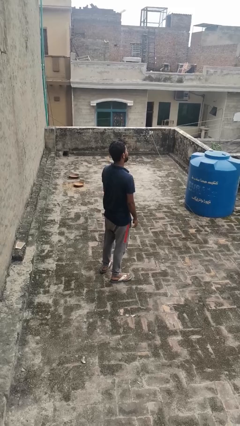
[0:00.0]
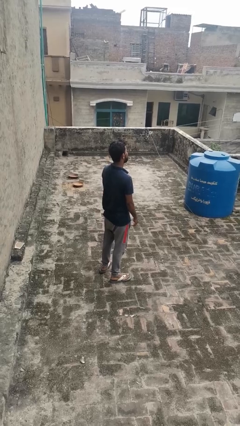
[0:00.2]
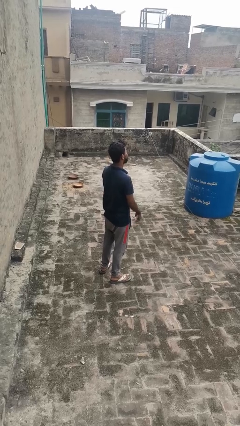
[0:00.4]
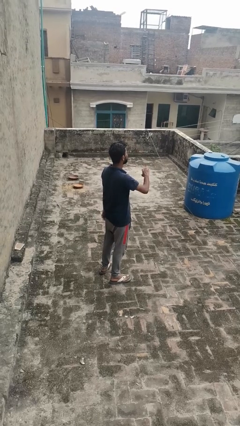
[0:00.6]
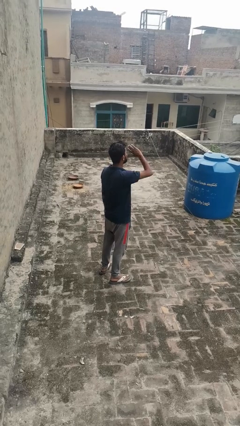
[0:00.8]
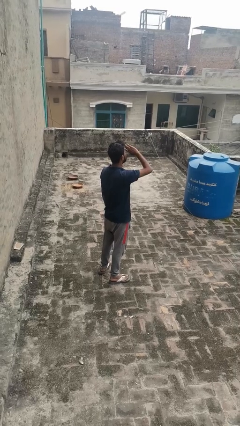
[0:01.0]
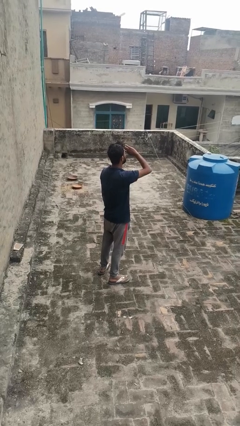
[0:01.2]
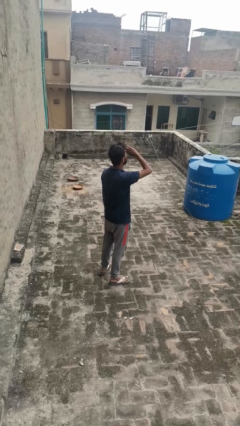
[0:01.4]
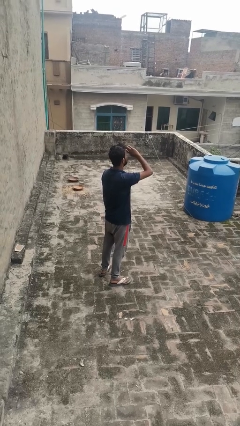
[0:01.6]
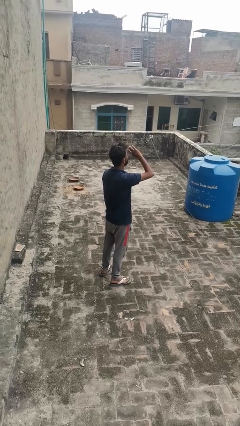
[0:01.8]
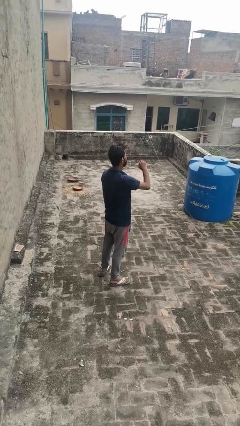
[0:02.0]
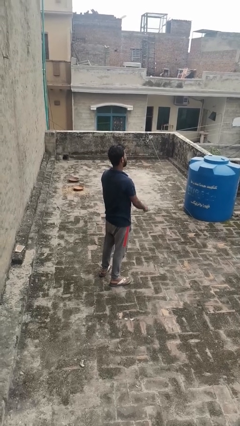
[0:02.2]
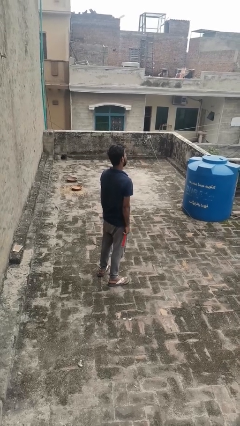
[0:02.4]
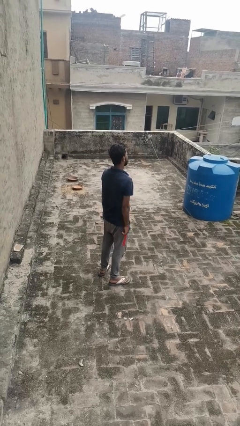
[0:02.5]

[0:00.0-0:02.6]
person shades eyes

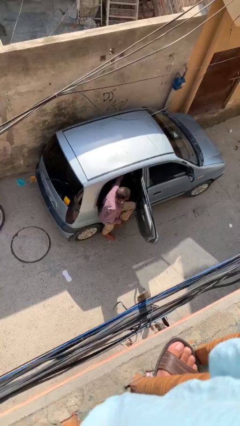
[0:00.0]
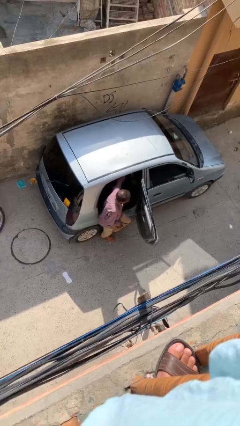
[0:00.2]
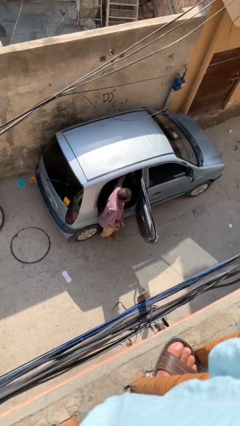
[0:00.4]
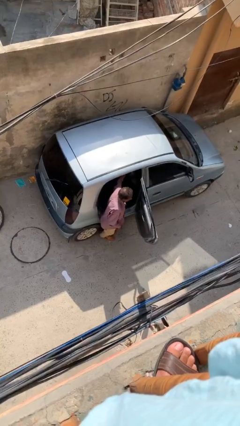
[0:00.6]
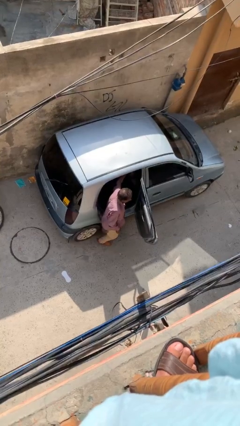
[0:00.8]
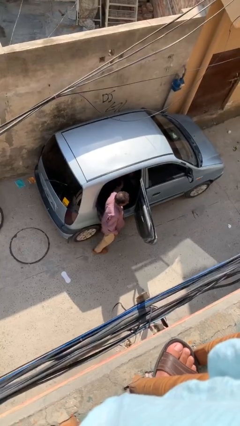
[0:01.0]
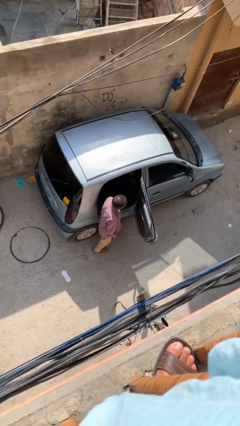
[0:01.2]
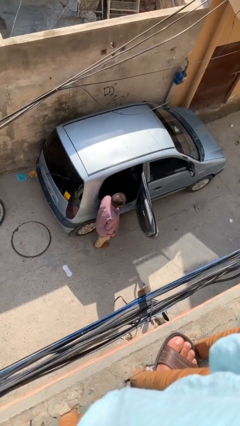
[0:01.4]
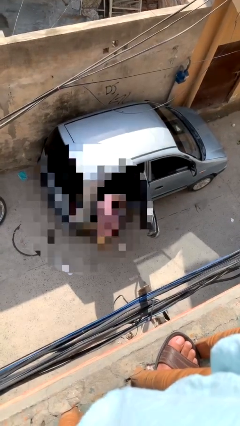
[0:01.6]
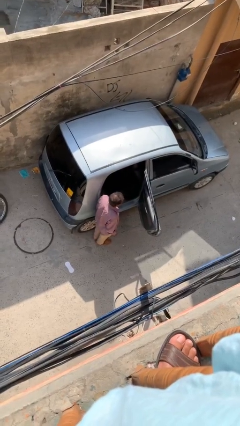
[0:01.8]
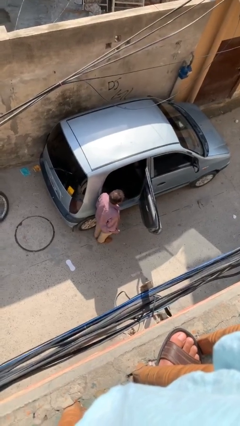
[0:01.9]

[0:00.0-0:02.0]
person exits car

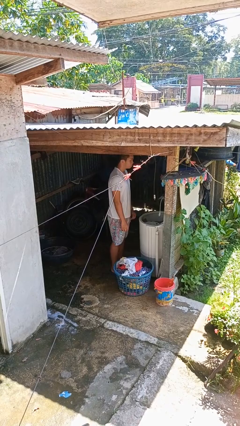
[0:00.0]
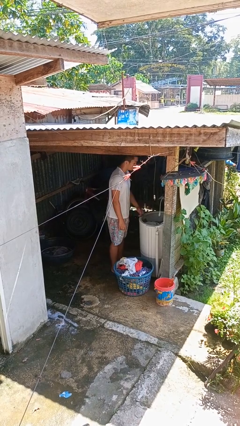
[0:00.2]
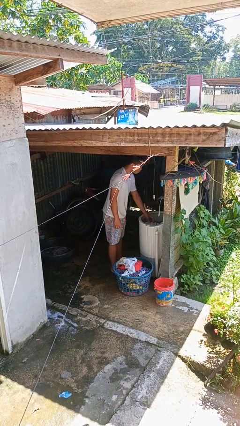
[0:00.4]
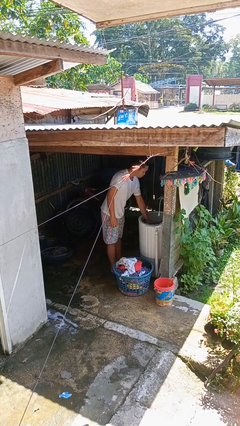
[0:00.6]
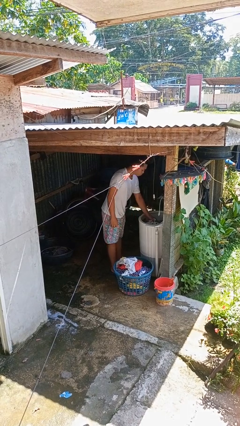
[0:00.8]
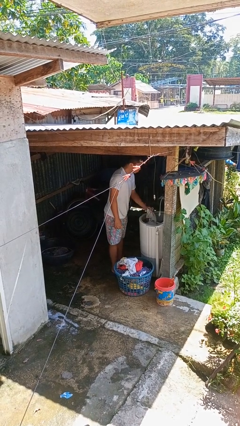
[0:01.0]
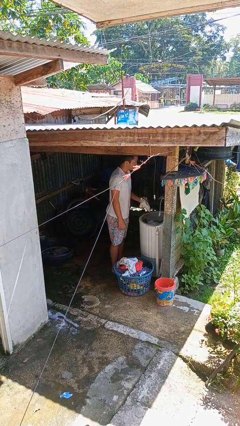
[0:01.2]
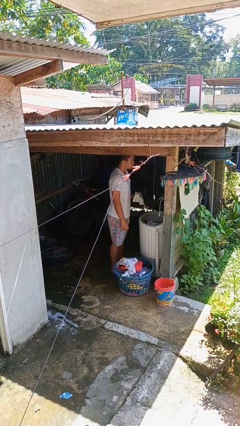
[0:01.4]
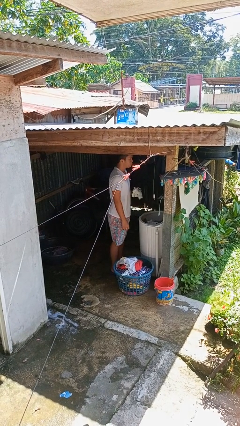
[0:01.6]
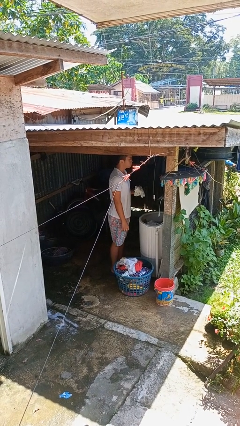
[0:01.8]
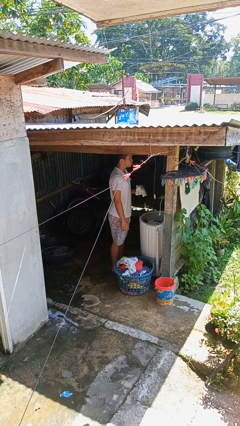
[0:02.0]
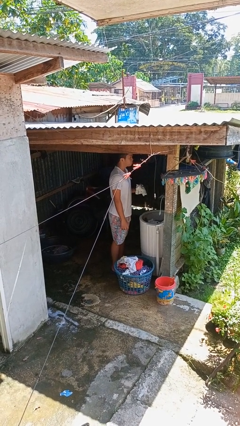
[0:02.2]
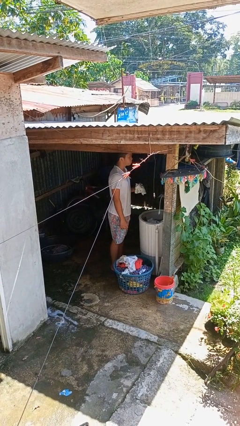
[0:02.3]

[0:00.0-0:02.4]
person unloads clotheswasher

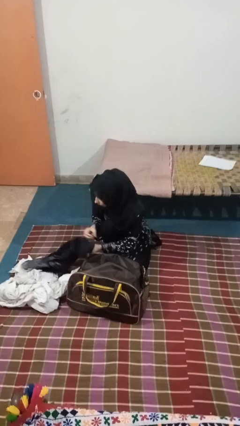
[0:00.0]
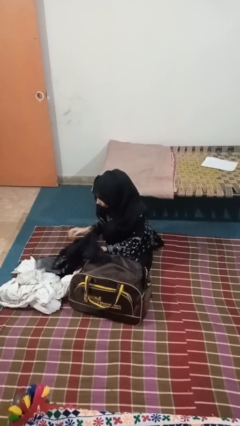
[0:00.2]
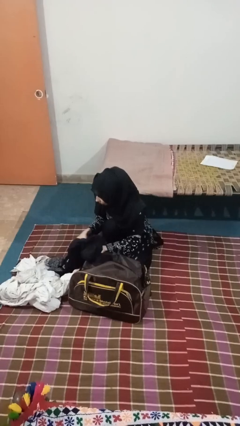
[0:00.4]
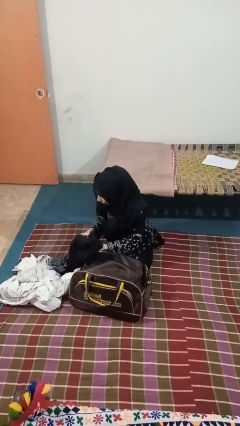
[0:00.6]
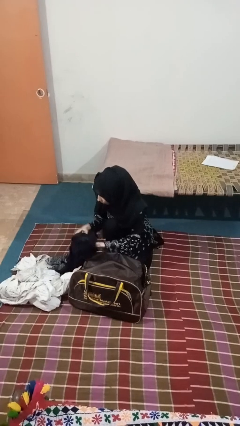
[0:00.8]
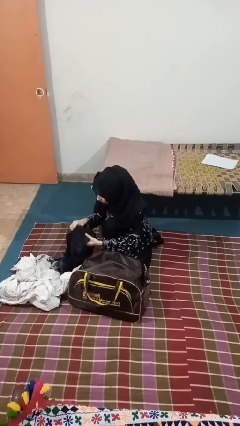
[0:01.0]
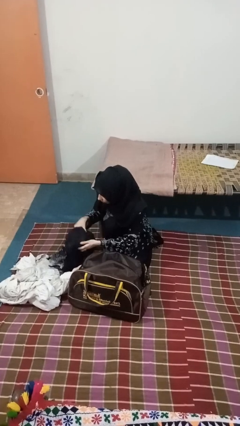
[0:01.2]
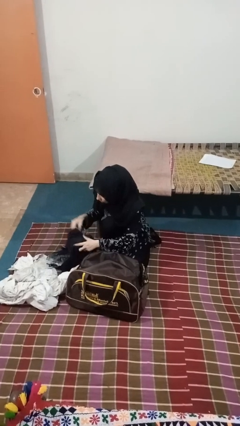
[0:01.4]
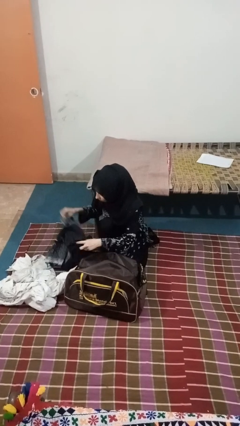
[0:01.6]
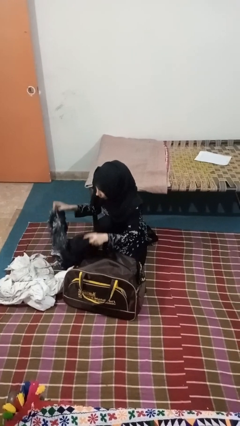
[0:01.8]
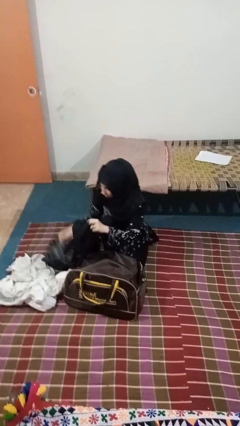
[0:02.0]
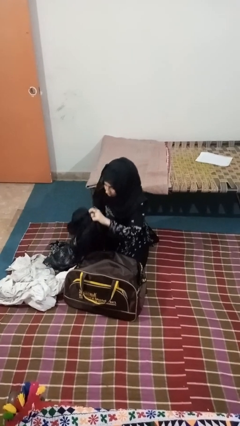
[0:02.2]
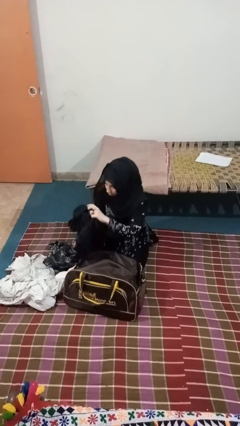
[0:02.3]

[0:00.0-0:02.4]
person loads clothes into suitcase

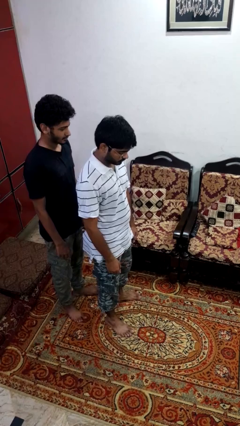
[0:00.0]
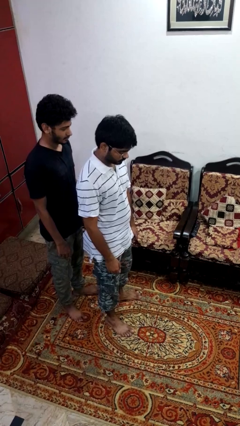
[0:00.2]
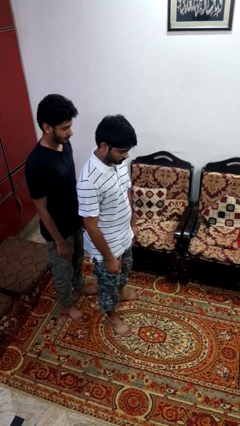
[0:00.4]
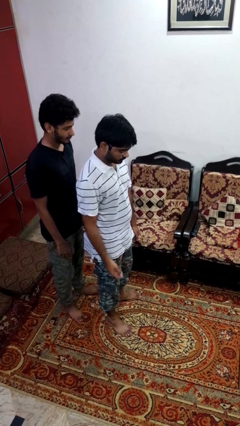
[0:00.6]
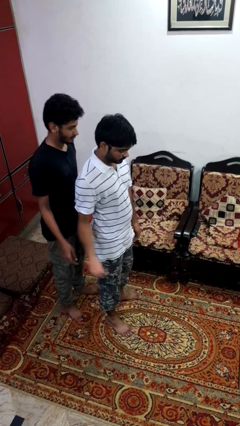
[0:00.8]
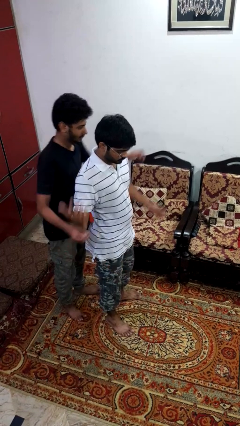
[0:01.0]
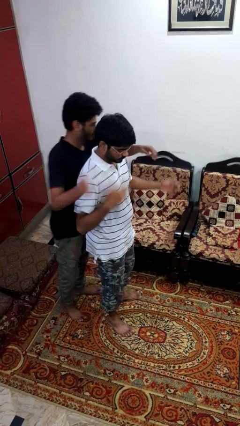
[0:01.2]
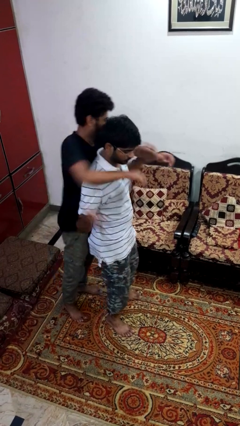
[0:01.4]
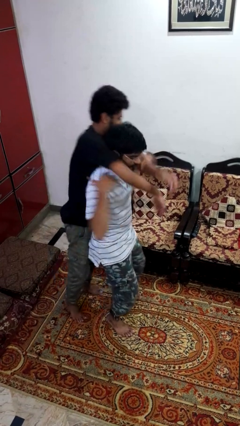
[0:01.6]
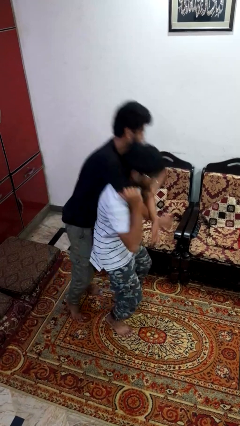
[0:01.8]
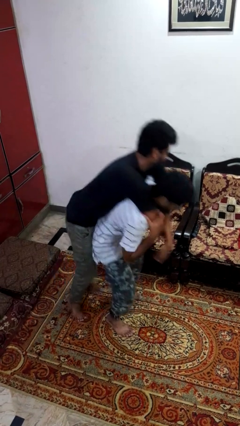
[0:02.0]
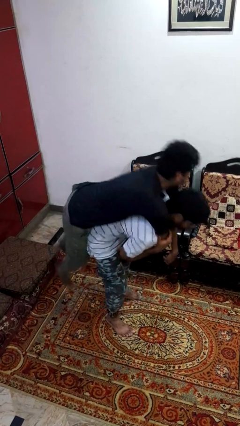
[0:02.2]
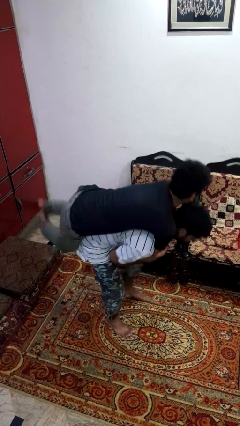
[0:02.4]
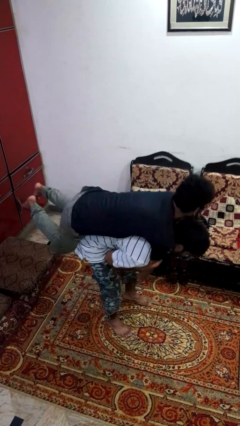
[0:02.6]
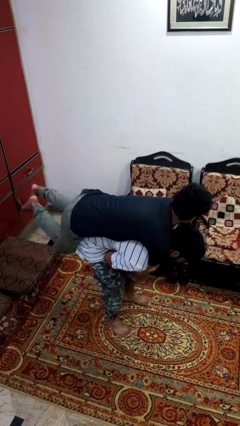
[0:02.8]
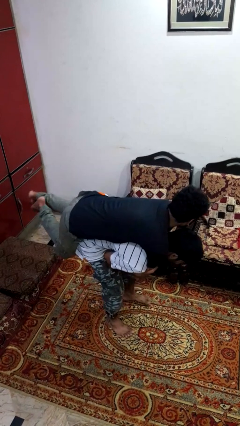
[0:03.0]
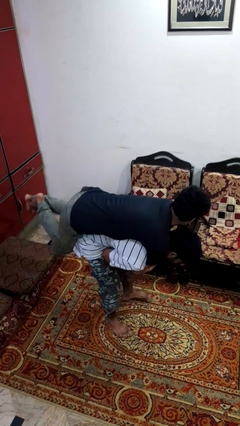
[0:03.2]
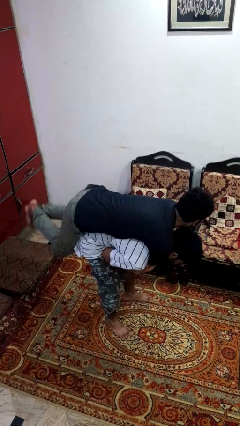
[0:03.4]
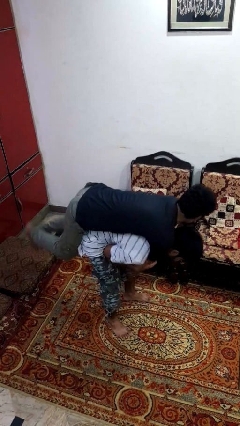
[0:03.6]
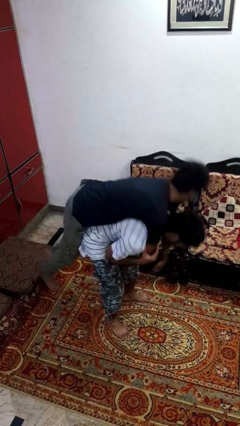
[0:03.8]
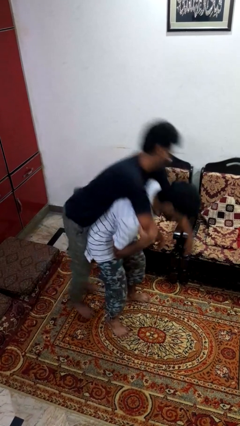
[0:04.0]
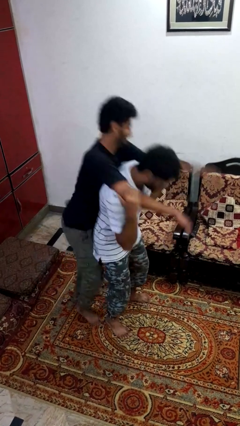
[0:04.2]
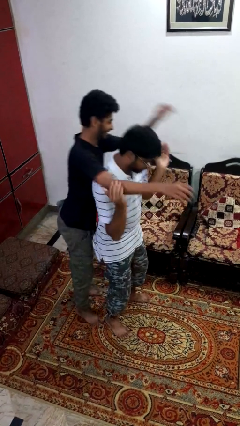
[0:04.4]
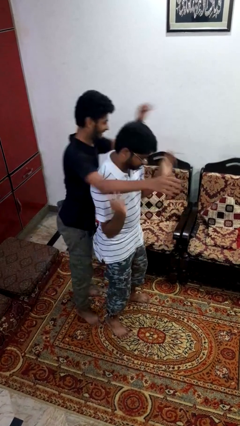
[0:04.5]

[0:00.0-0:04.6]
person carries person over shoulder

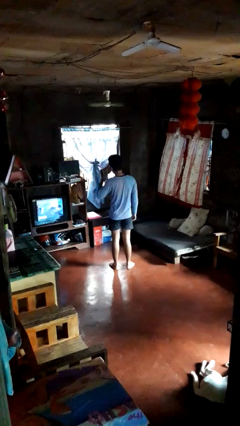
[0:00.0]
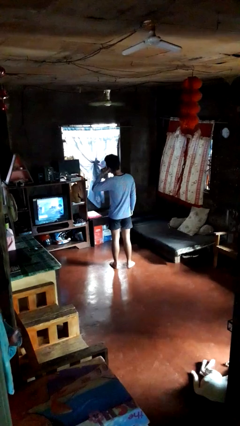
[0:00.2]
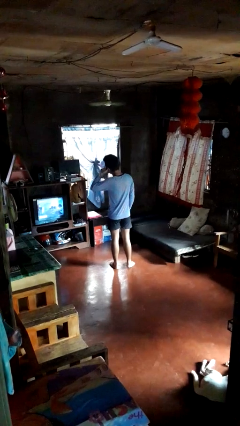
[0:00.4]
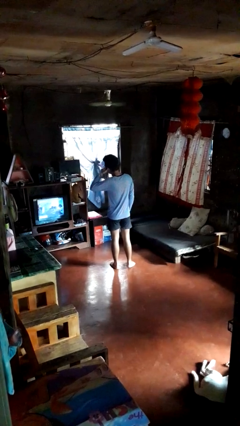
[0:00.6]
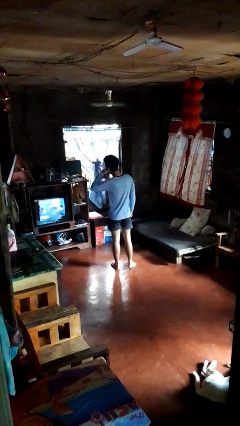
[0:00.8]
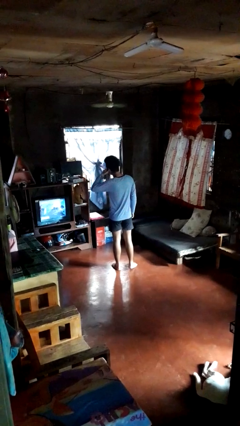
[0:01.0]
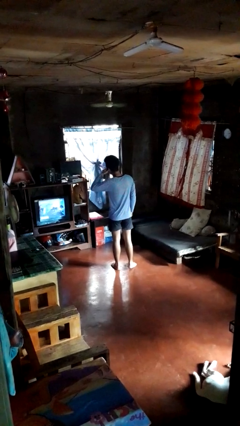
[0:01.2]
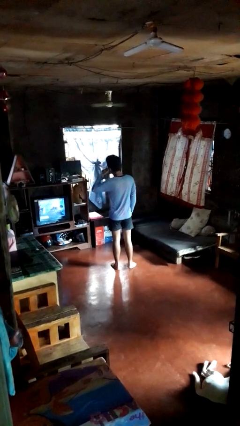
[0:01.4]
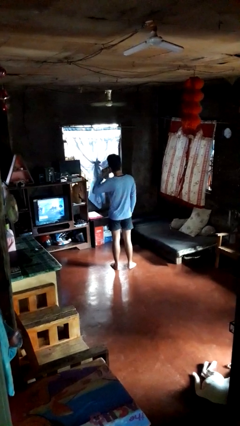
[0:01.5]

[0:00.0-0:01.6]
person gestures call me

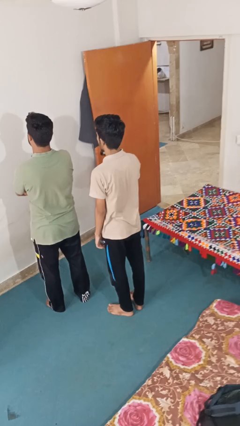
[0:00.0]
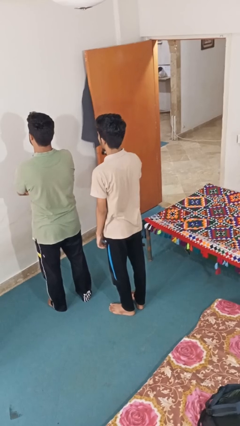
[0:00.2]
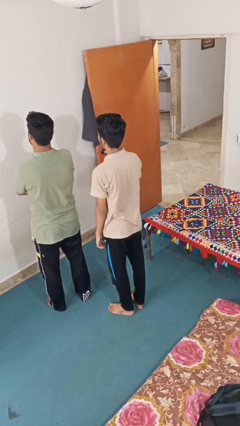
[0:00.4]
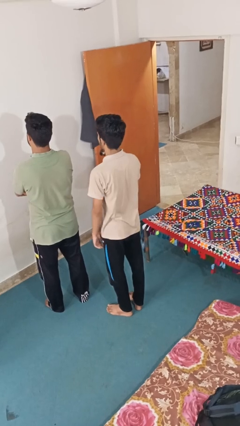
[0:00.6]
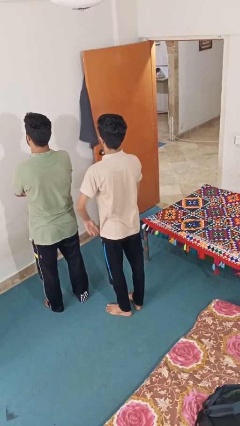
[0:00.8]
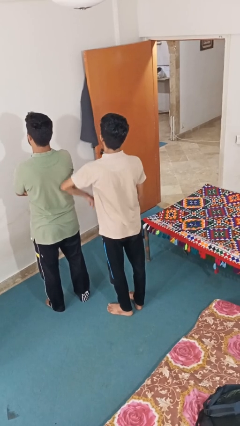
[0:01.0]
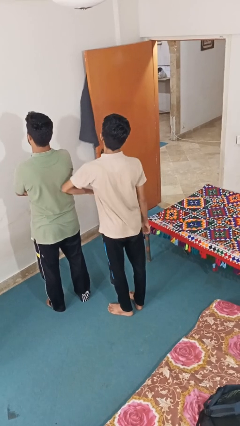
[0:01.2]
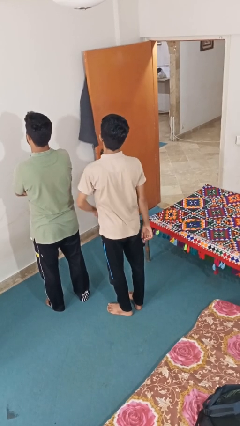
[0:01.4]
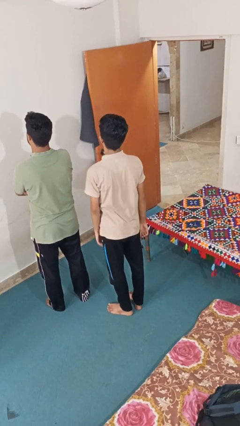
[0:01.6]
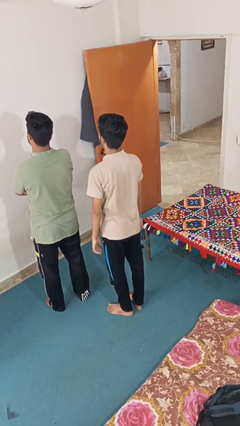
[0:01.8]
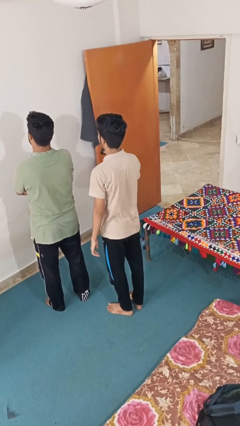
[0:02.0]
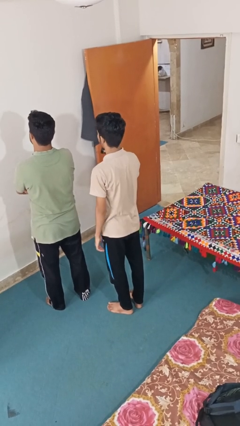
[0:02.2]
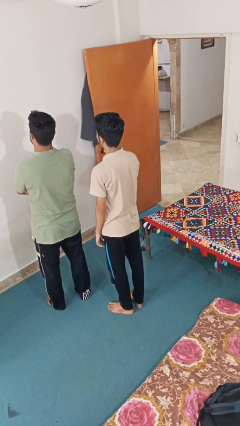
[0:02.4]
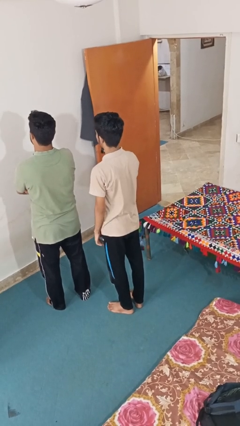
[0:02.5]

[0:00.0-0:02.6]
person nudges person with elbow
